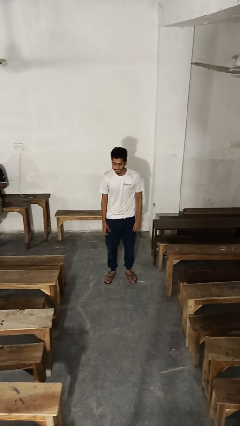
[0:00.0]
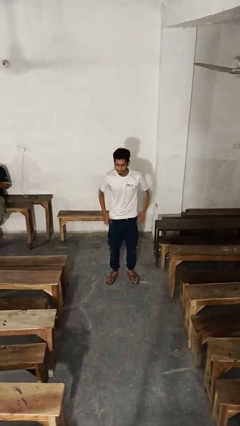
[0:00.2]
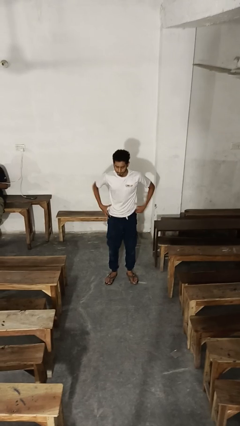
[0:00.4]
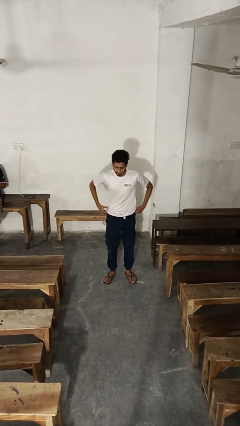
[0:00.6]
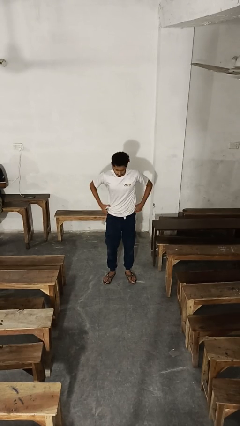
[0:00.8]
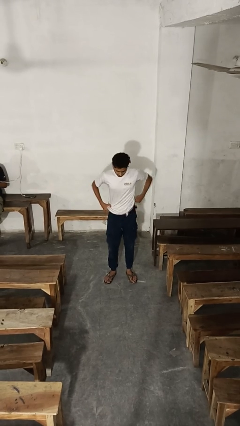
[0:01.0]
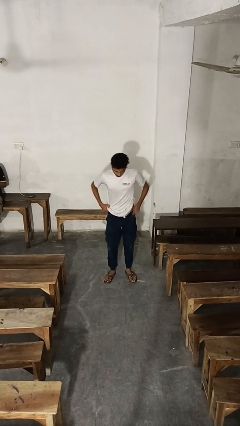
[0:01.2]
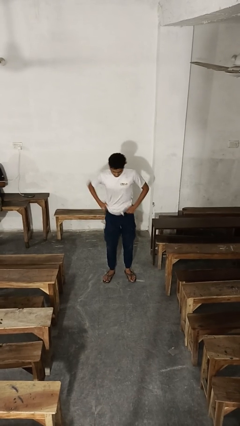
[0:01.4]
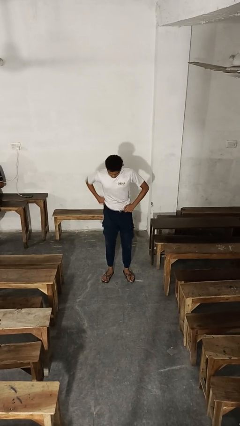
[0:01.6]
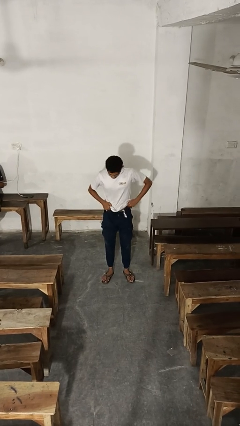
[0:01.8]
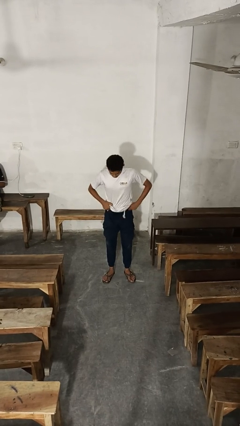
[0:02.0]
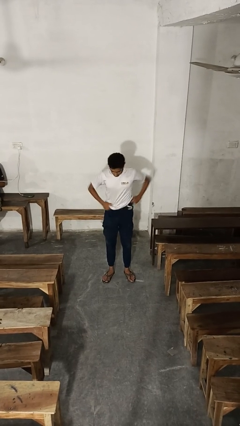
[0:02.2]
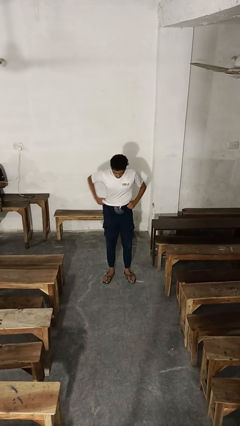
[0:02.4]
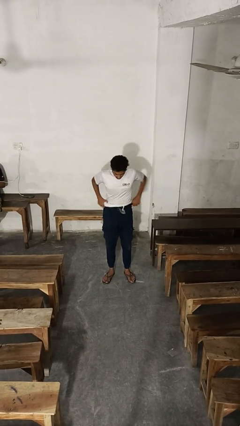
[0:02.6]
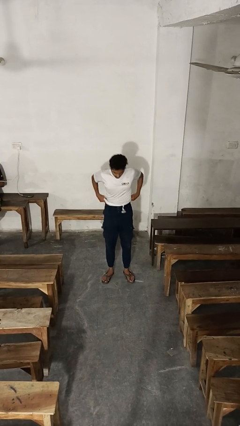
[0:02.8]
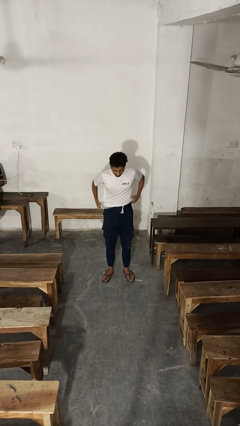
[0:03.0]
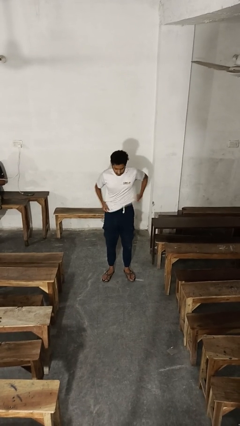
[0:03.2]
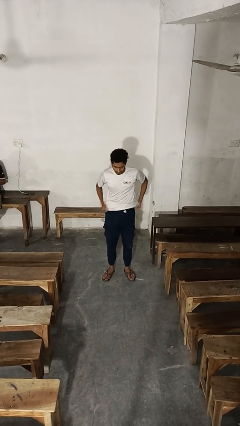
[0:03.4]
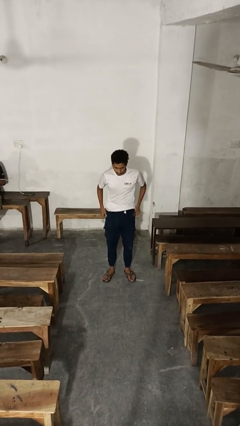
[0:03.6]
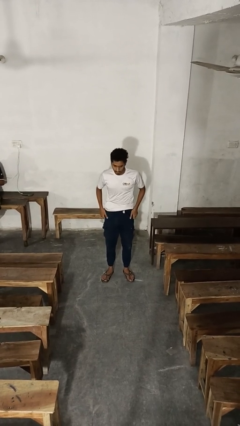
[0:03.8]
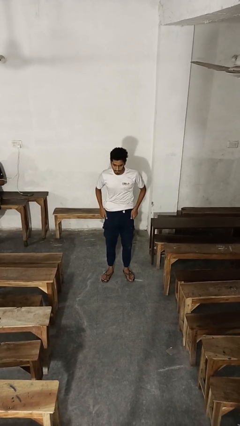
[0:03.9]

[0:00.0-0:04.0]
person hikes up pants

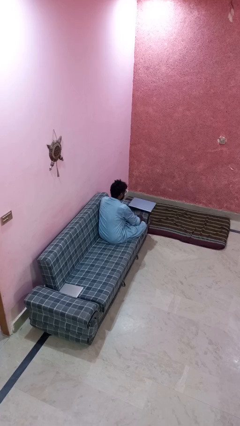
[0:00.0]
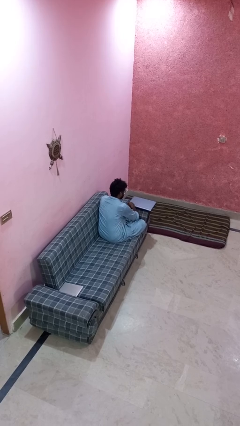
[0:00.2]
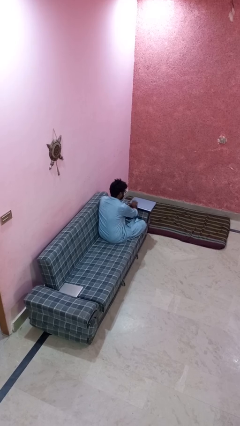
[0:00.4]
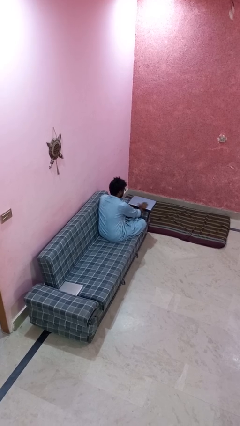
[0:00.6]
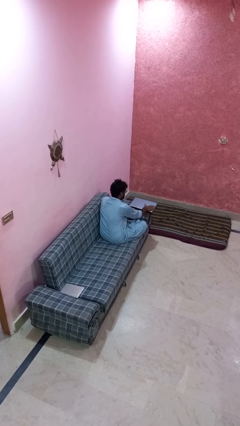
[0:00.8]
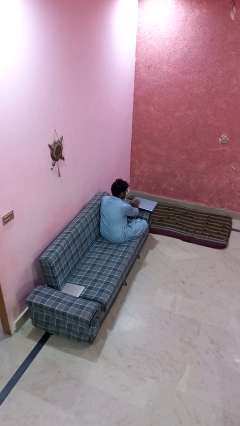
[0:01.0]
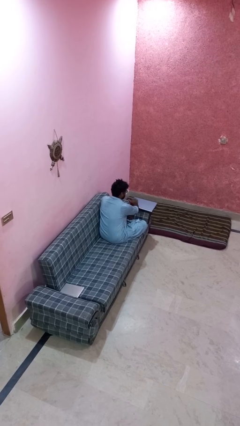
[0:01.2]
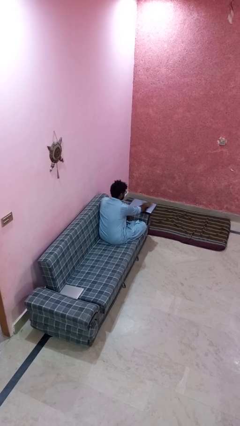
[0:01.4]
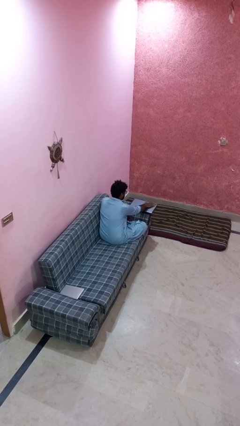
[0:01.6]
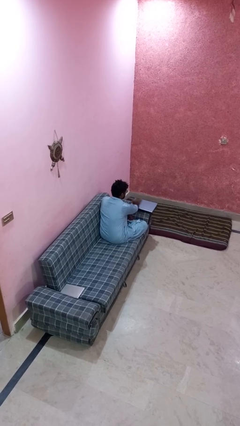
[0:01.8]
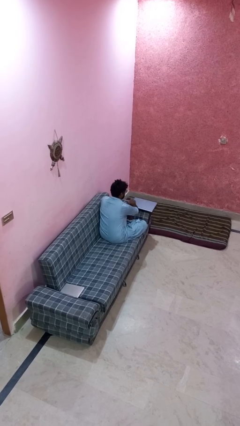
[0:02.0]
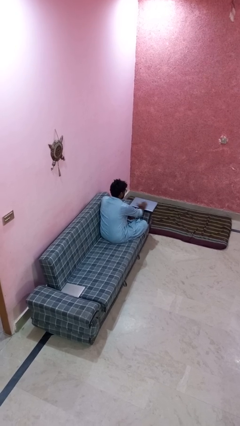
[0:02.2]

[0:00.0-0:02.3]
person waves hand over object

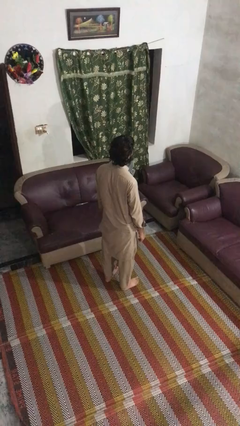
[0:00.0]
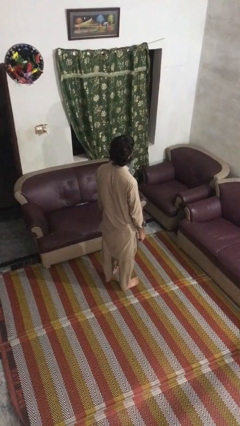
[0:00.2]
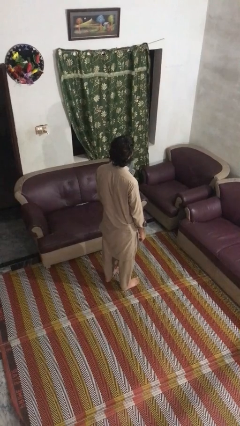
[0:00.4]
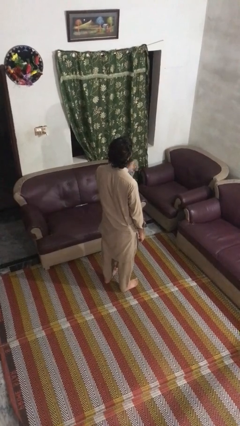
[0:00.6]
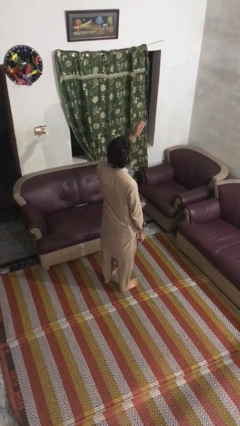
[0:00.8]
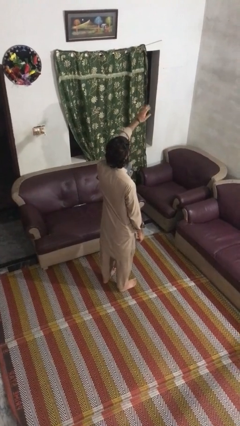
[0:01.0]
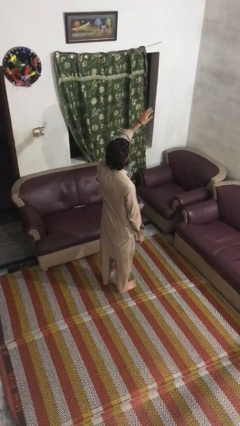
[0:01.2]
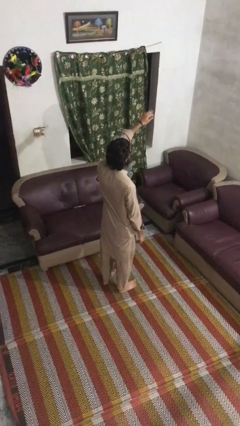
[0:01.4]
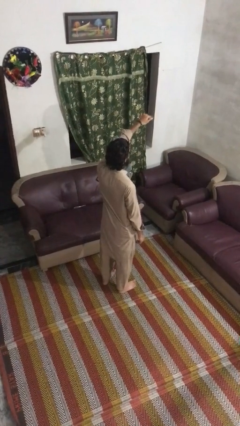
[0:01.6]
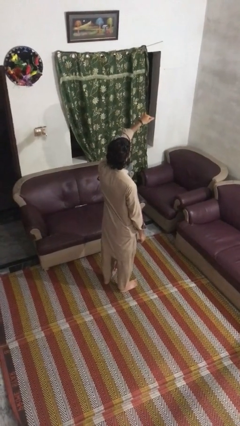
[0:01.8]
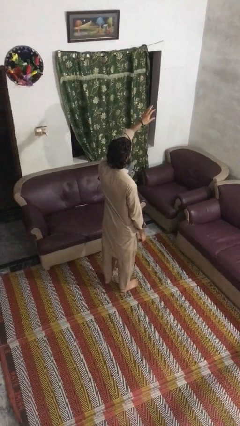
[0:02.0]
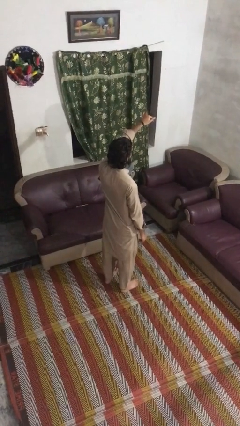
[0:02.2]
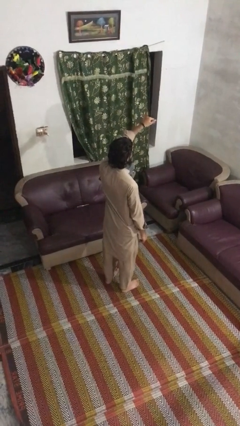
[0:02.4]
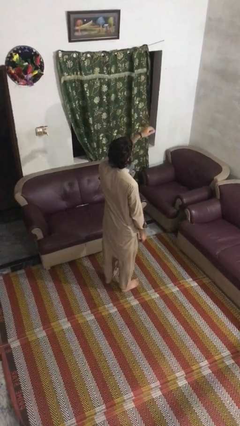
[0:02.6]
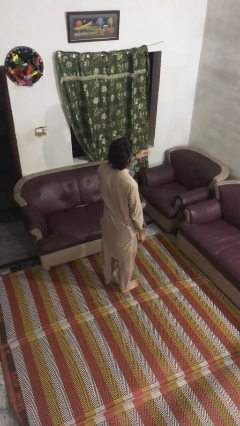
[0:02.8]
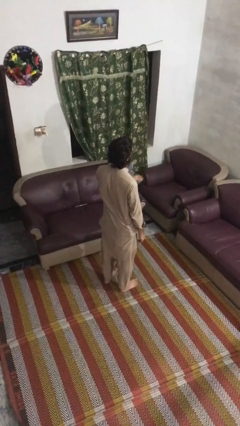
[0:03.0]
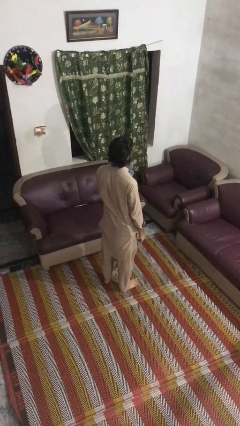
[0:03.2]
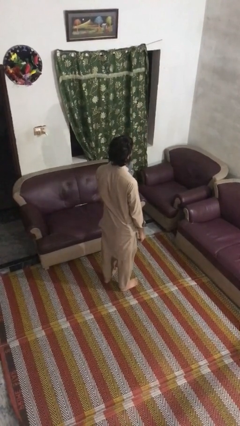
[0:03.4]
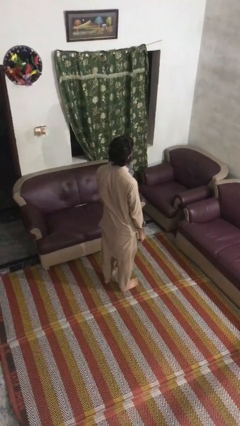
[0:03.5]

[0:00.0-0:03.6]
person gestures come here

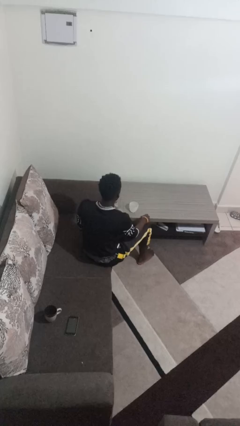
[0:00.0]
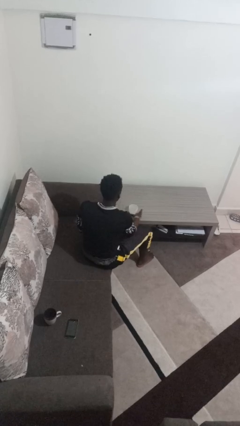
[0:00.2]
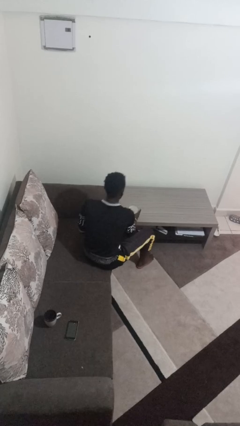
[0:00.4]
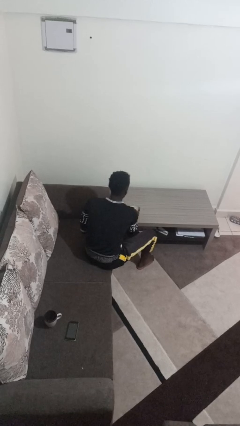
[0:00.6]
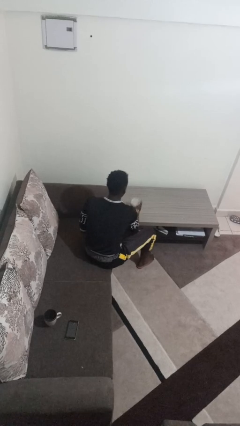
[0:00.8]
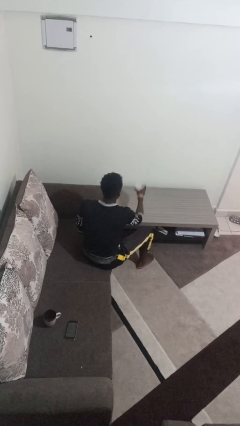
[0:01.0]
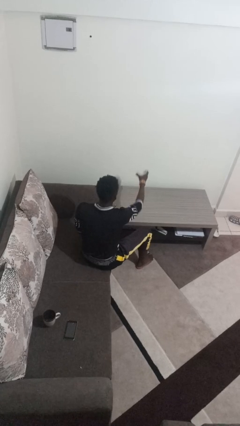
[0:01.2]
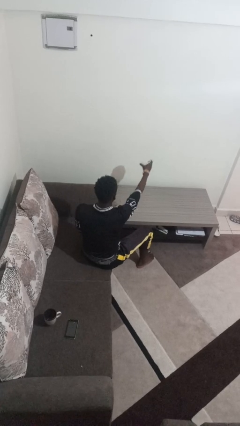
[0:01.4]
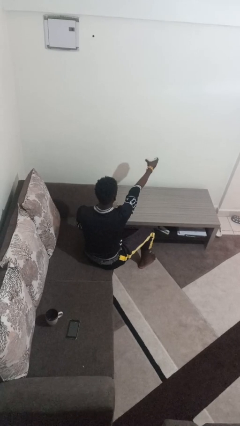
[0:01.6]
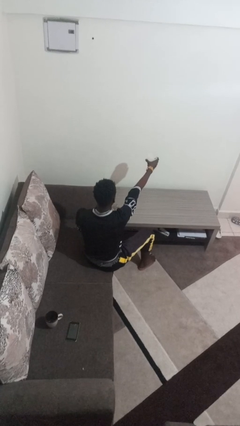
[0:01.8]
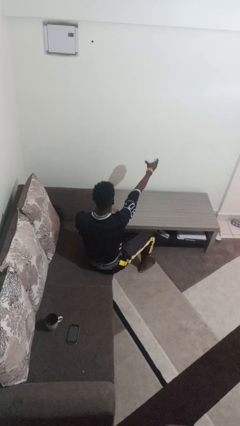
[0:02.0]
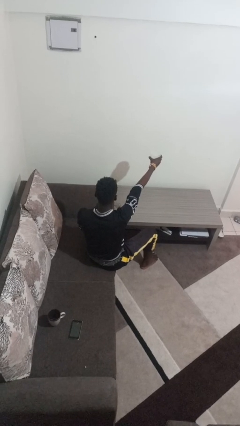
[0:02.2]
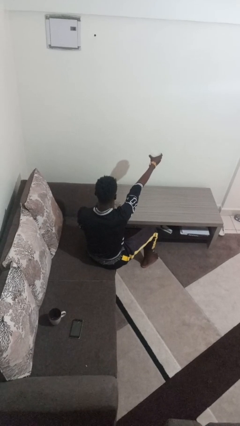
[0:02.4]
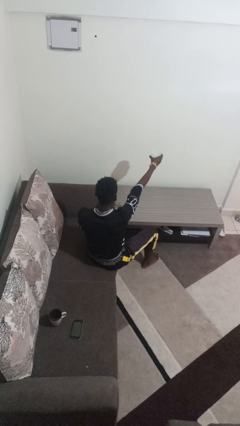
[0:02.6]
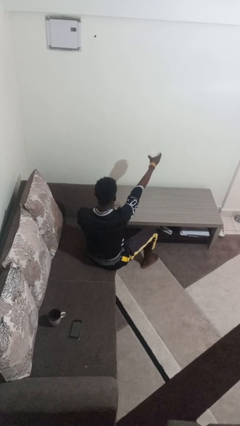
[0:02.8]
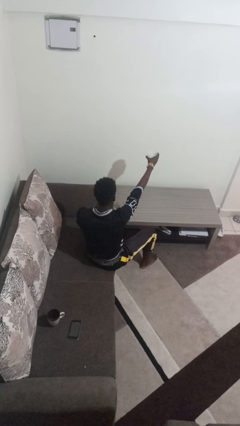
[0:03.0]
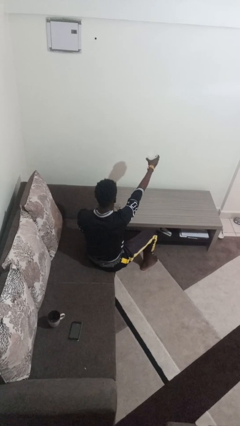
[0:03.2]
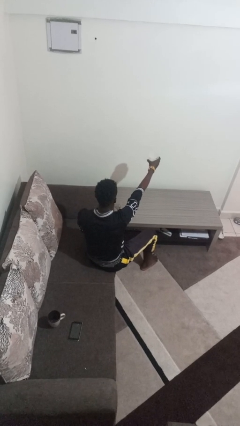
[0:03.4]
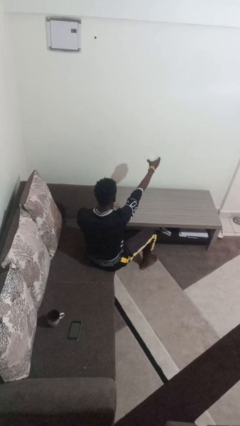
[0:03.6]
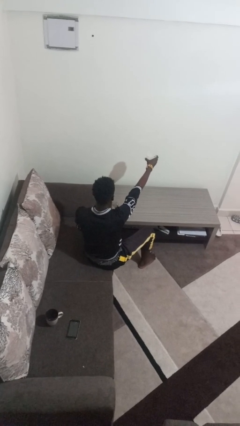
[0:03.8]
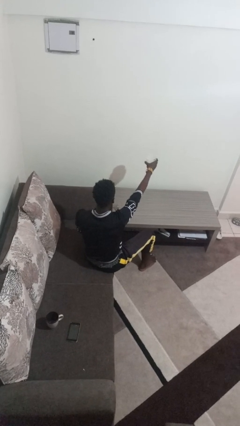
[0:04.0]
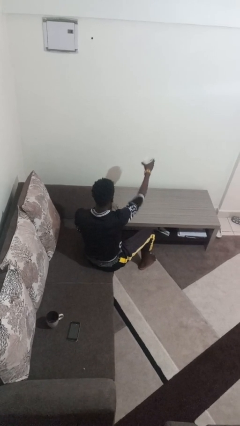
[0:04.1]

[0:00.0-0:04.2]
person picks up object from table

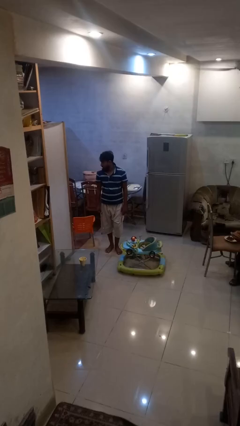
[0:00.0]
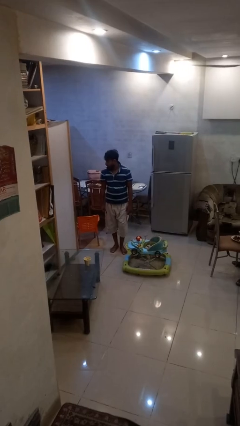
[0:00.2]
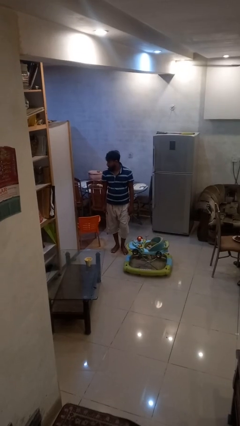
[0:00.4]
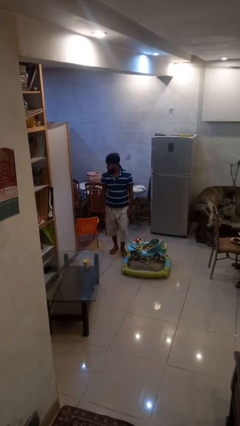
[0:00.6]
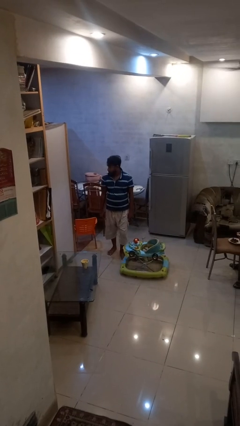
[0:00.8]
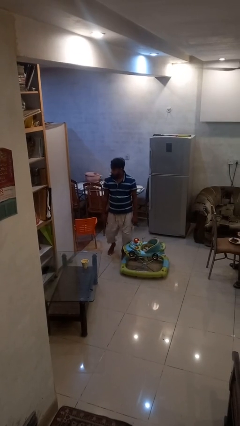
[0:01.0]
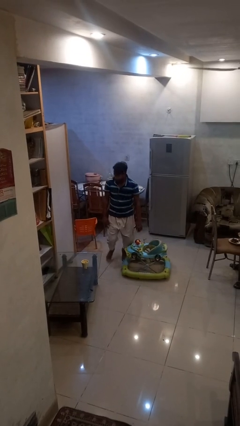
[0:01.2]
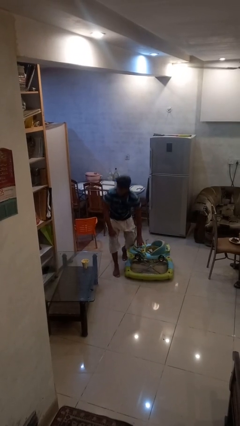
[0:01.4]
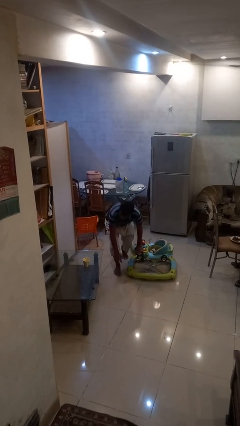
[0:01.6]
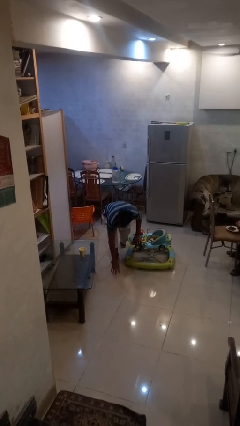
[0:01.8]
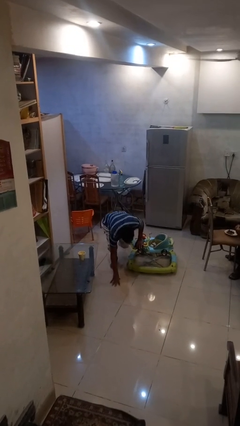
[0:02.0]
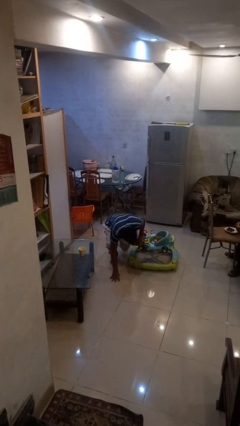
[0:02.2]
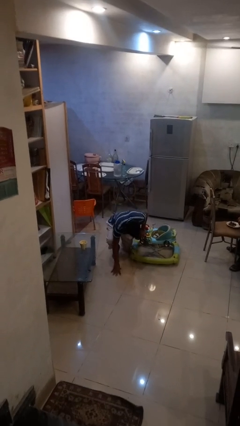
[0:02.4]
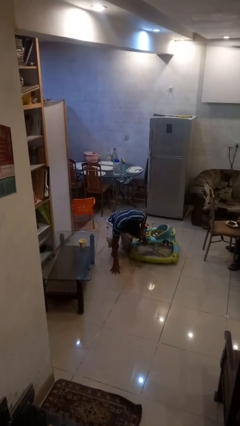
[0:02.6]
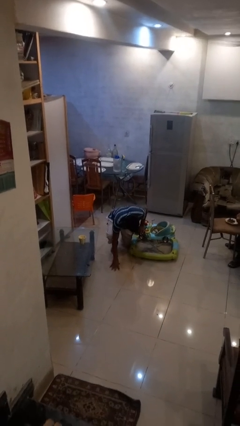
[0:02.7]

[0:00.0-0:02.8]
person trips on object on floor

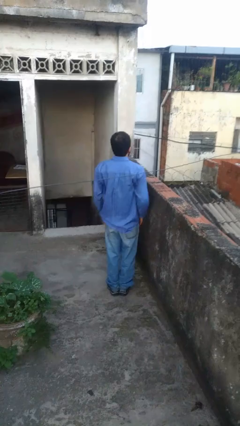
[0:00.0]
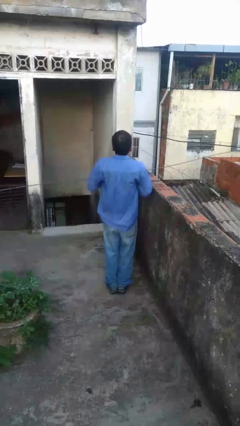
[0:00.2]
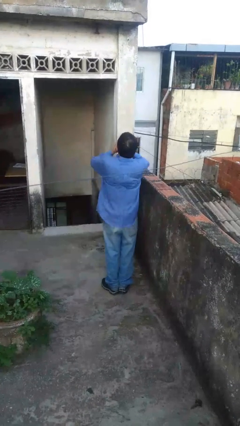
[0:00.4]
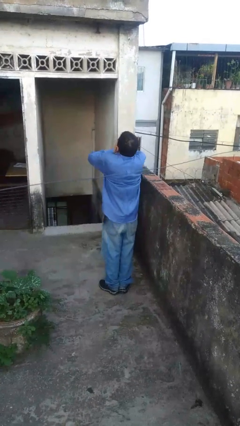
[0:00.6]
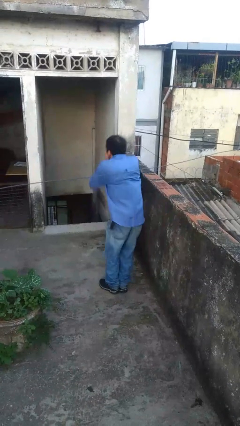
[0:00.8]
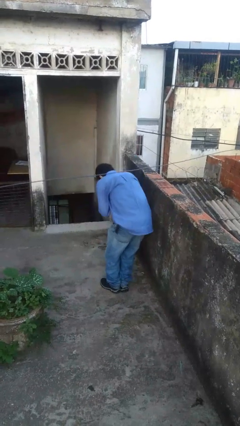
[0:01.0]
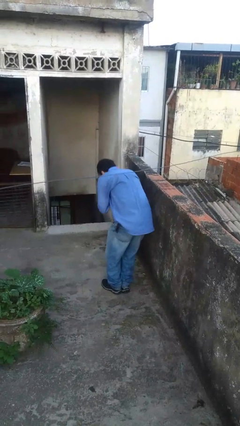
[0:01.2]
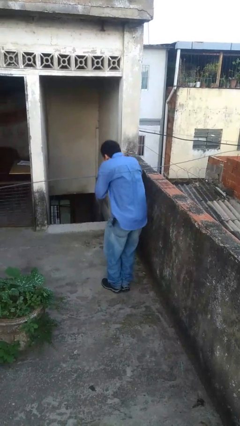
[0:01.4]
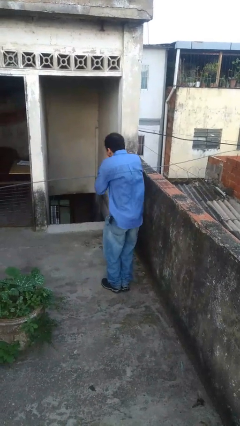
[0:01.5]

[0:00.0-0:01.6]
person sneezes into hand
